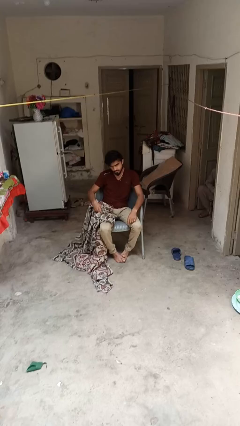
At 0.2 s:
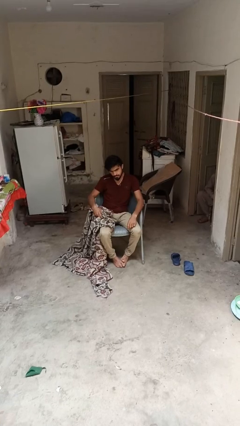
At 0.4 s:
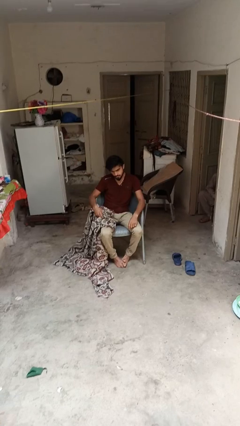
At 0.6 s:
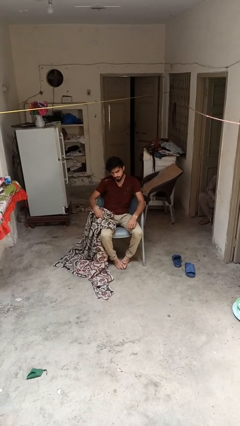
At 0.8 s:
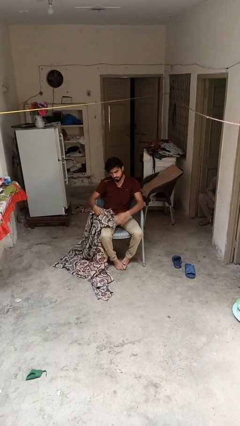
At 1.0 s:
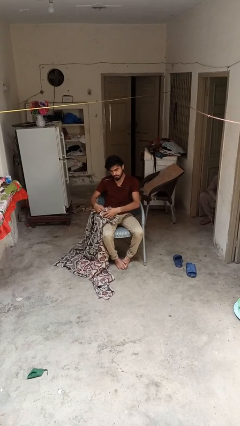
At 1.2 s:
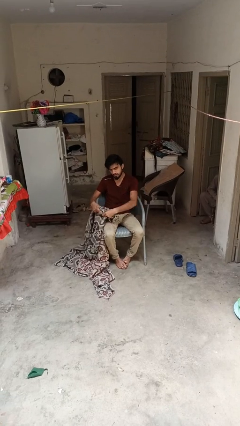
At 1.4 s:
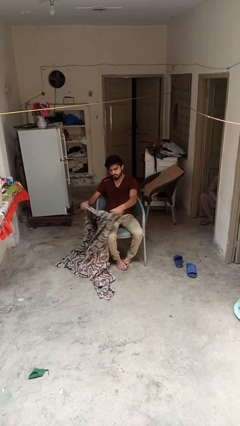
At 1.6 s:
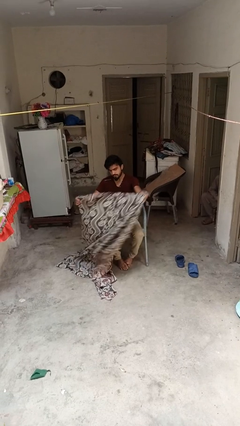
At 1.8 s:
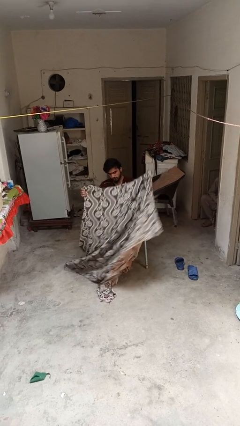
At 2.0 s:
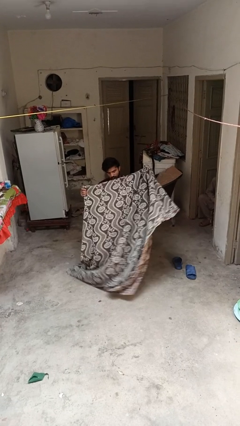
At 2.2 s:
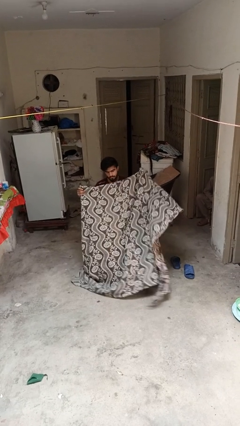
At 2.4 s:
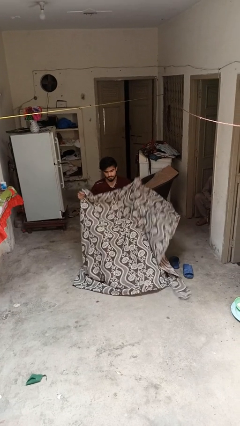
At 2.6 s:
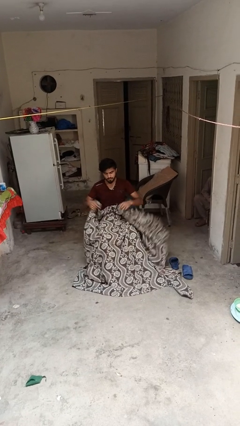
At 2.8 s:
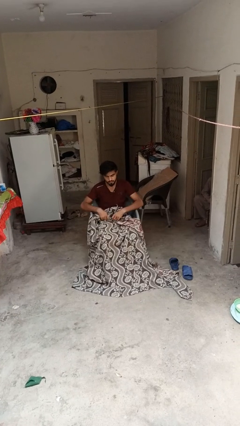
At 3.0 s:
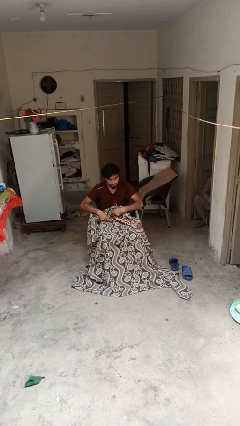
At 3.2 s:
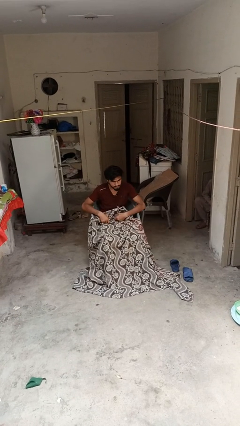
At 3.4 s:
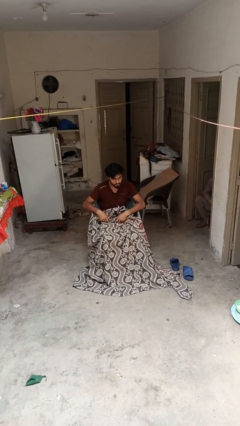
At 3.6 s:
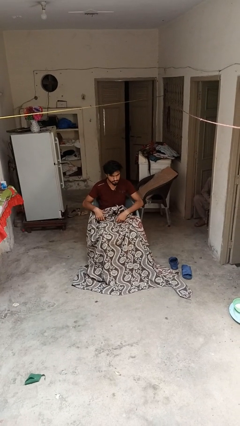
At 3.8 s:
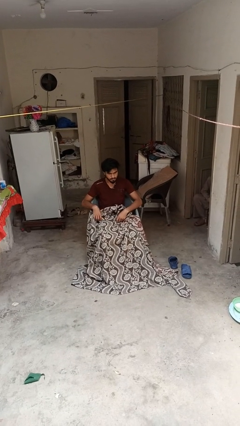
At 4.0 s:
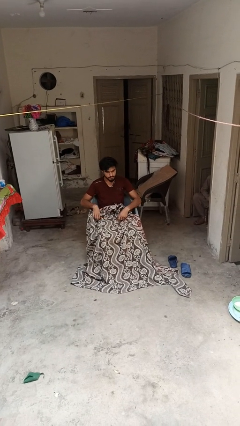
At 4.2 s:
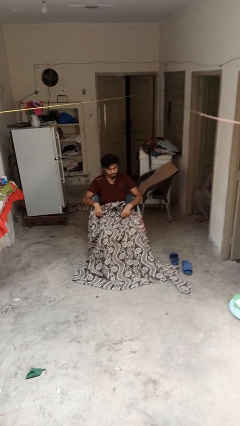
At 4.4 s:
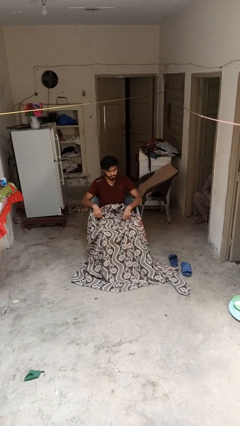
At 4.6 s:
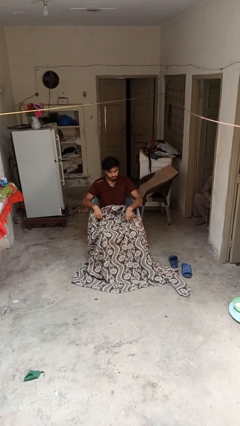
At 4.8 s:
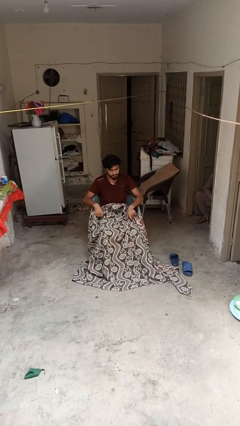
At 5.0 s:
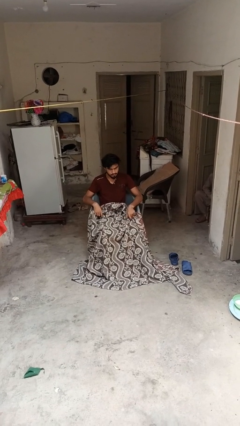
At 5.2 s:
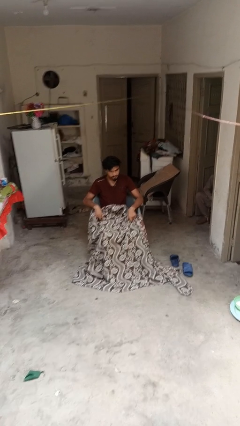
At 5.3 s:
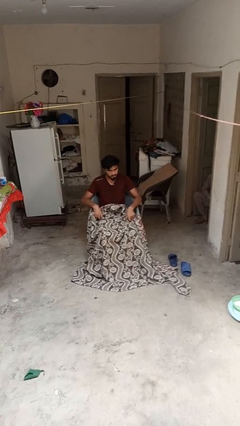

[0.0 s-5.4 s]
person covers with blanket

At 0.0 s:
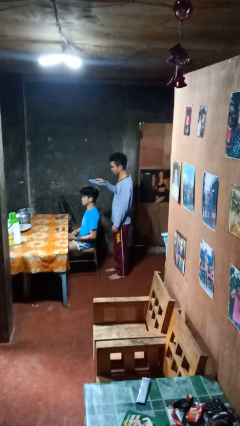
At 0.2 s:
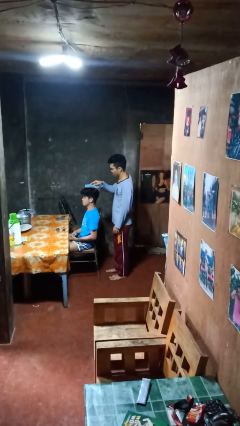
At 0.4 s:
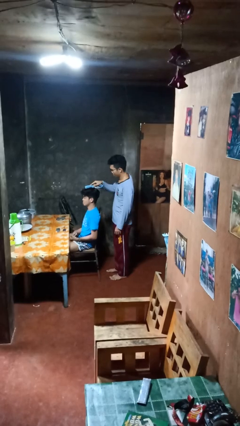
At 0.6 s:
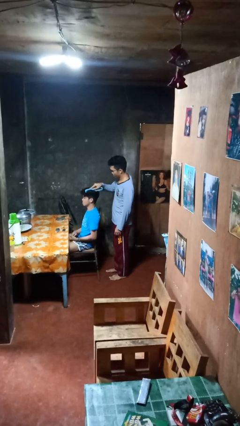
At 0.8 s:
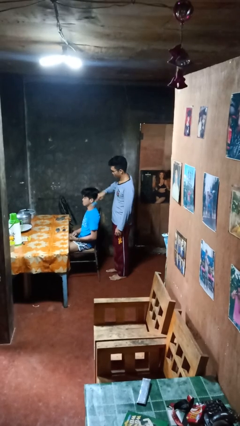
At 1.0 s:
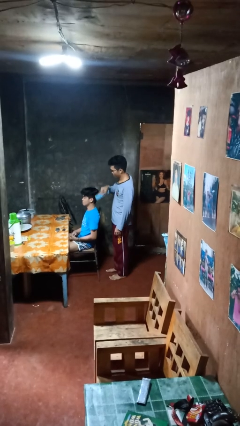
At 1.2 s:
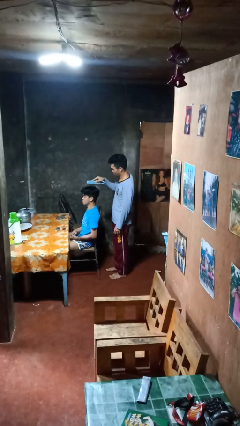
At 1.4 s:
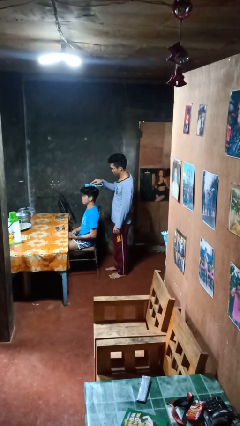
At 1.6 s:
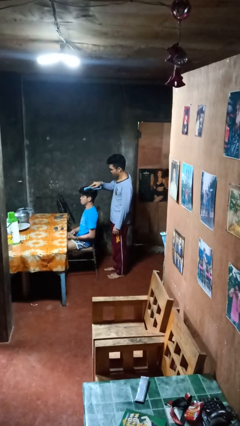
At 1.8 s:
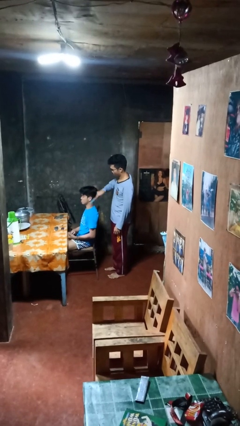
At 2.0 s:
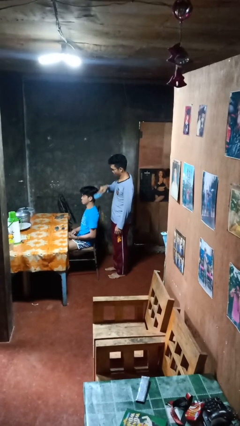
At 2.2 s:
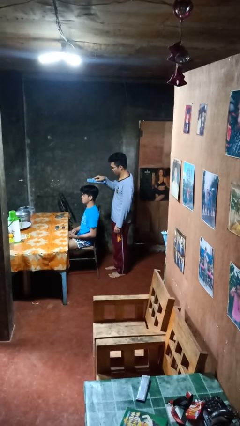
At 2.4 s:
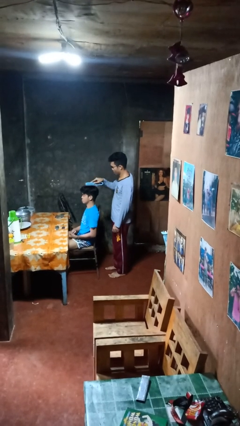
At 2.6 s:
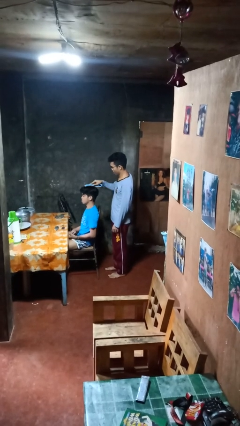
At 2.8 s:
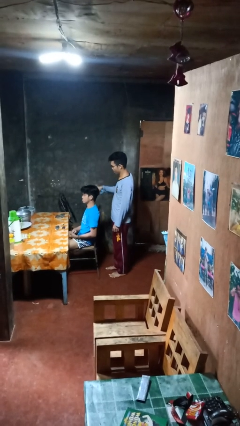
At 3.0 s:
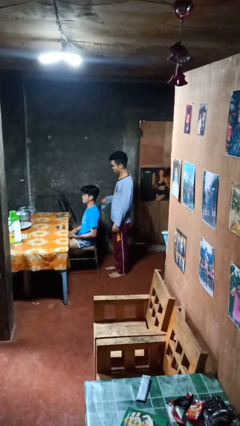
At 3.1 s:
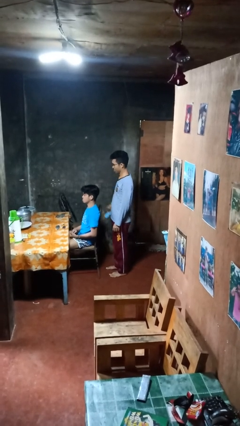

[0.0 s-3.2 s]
person brushes hair of person

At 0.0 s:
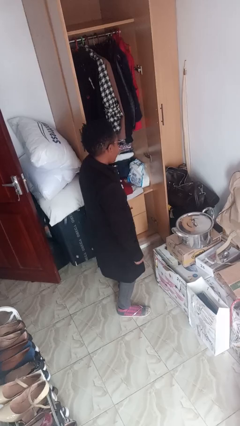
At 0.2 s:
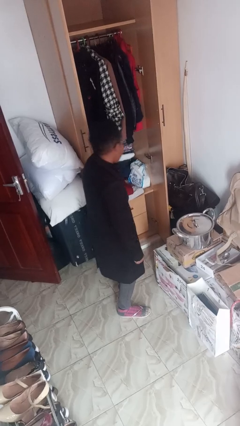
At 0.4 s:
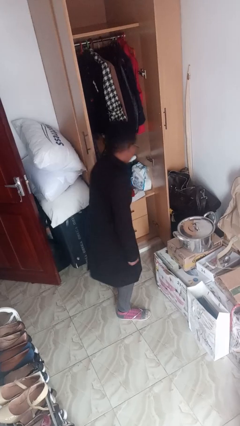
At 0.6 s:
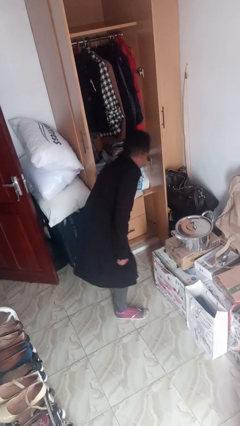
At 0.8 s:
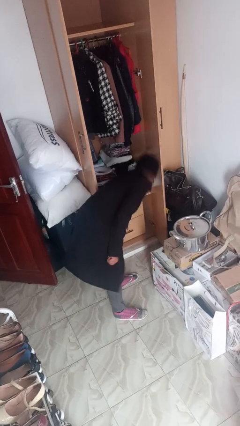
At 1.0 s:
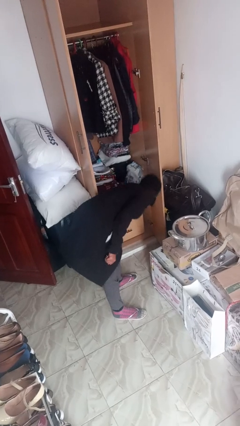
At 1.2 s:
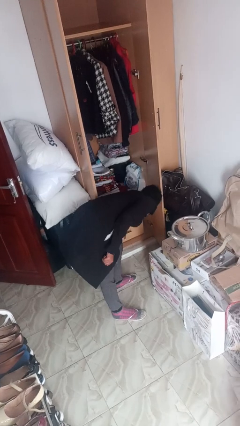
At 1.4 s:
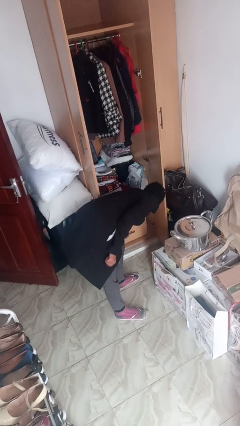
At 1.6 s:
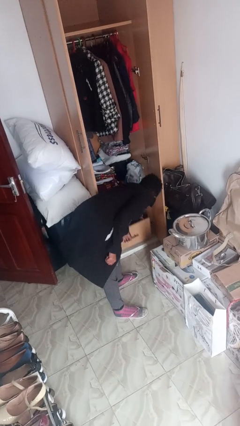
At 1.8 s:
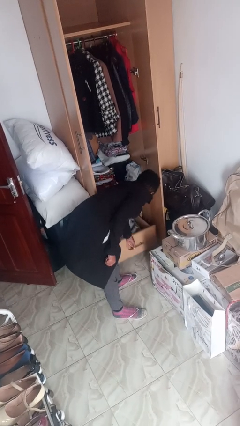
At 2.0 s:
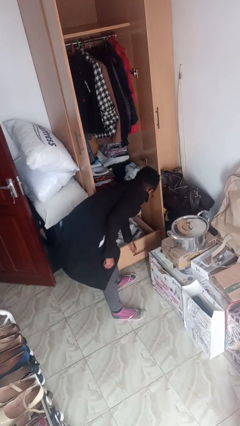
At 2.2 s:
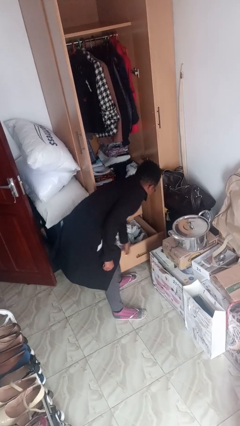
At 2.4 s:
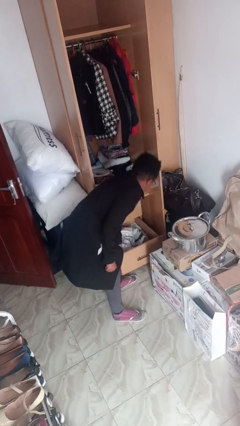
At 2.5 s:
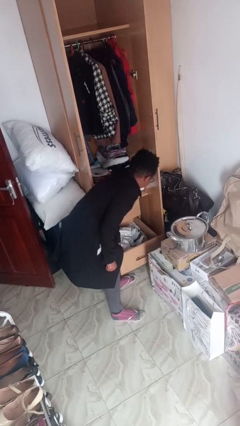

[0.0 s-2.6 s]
person opens dresser drawer

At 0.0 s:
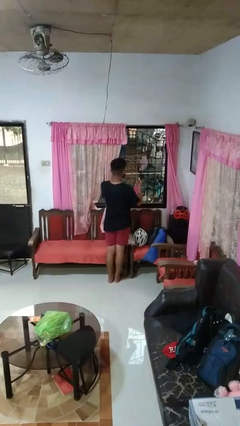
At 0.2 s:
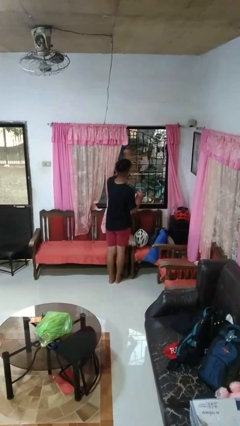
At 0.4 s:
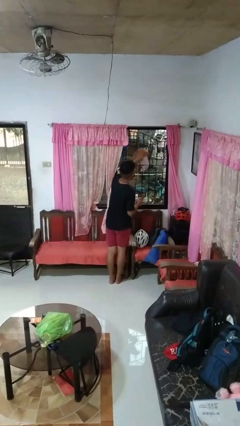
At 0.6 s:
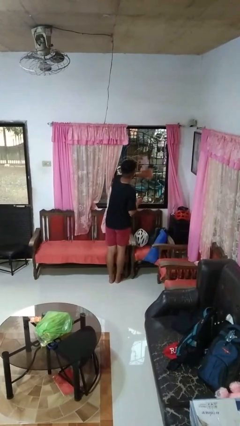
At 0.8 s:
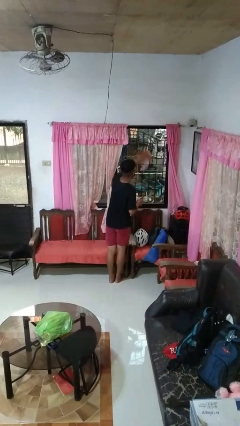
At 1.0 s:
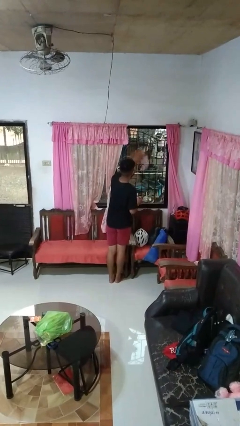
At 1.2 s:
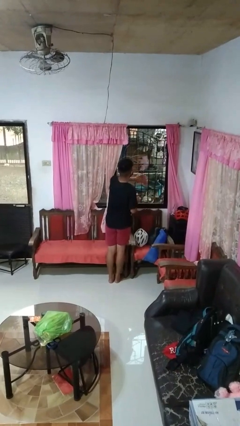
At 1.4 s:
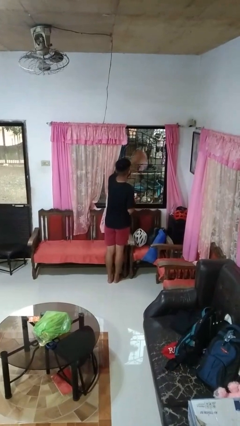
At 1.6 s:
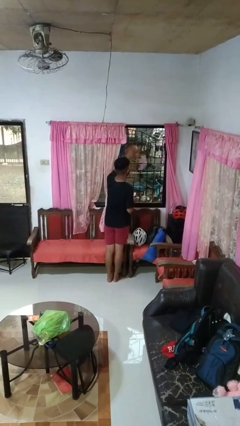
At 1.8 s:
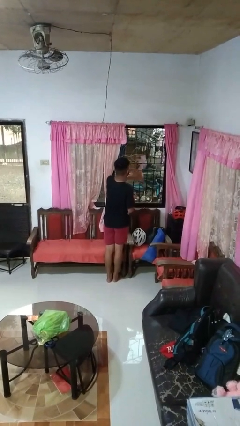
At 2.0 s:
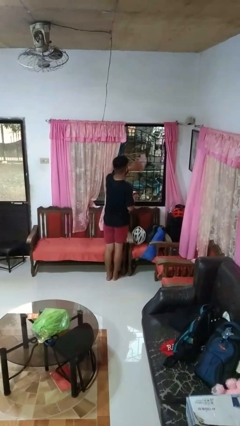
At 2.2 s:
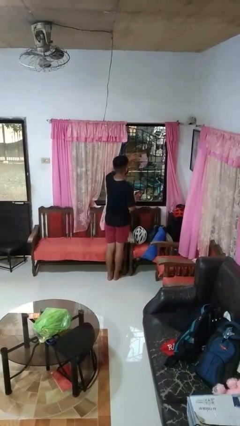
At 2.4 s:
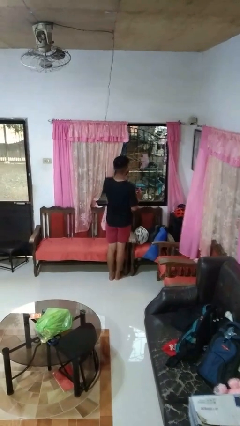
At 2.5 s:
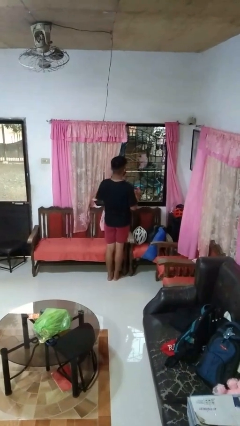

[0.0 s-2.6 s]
person washes window

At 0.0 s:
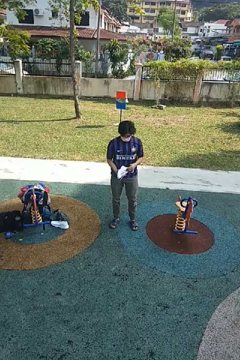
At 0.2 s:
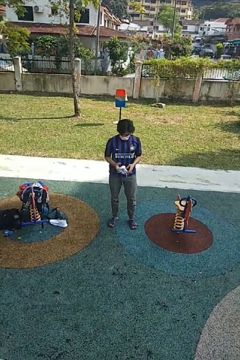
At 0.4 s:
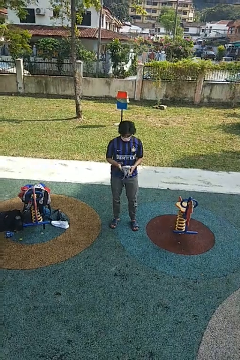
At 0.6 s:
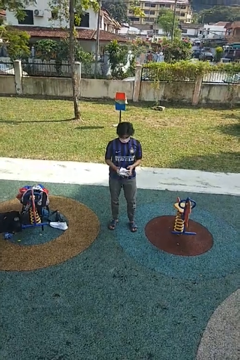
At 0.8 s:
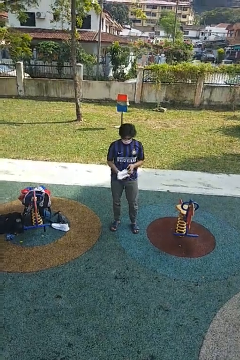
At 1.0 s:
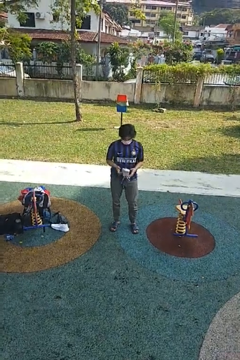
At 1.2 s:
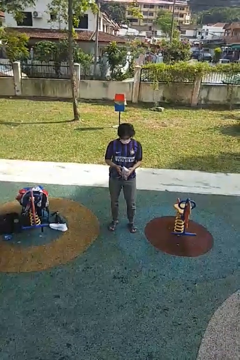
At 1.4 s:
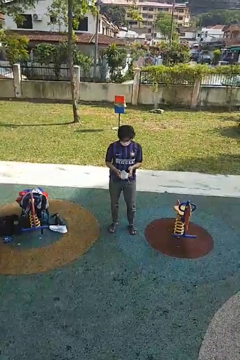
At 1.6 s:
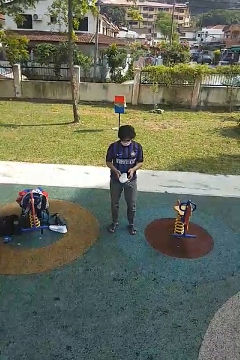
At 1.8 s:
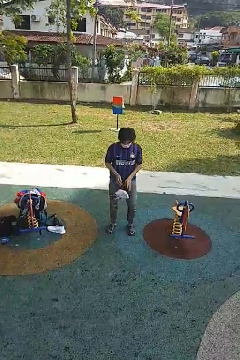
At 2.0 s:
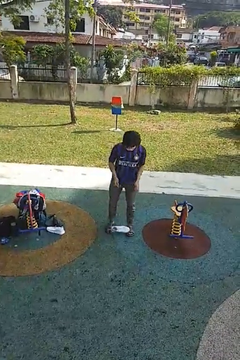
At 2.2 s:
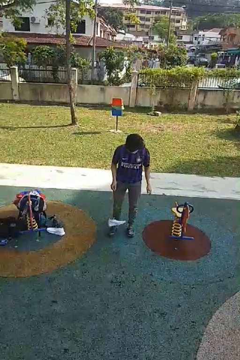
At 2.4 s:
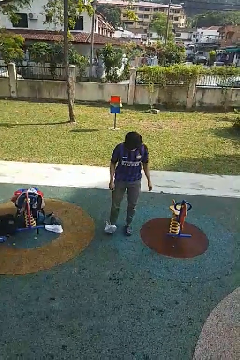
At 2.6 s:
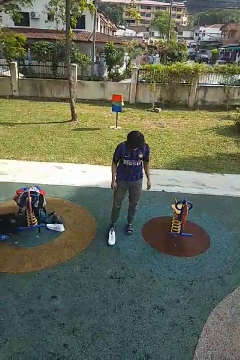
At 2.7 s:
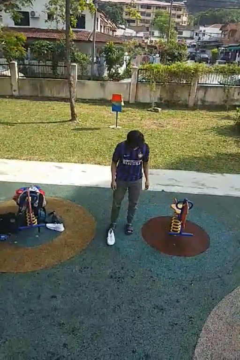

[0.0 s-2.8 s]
person drops object

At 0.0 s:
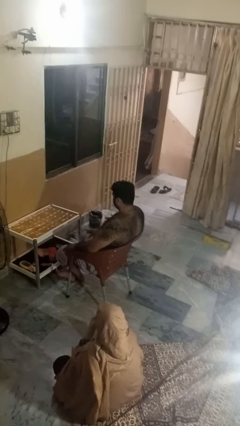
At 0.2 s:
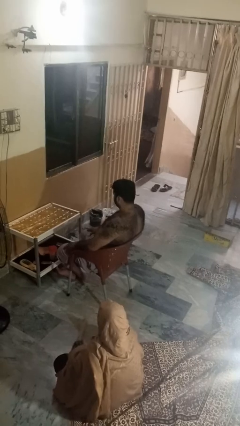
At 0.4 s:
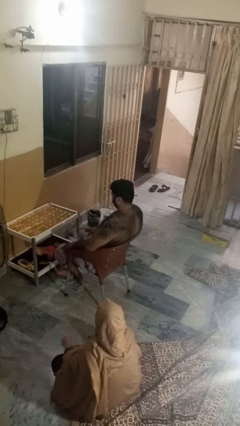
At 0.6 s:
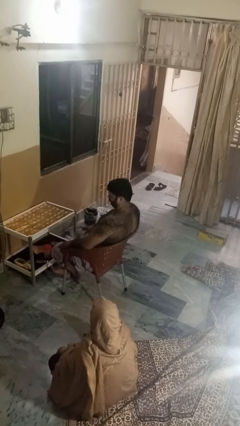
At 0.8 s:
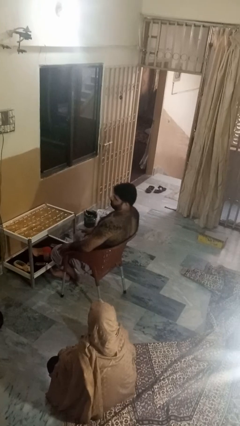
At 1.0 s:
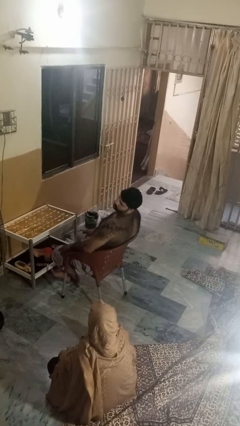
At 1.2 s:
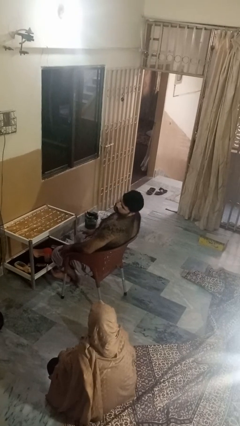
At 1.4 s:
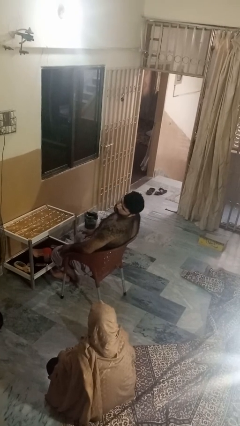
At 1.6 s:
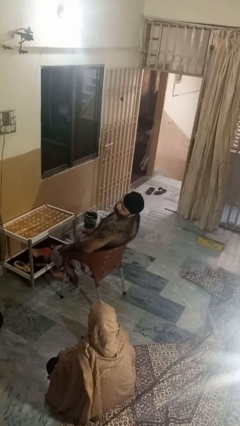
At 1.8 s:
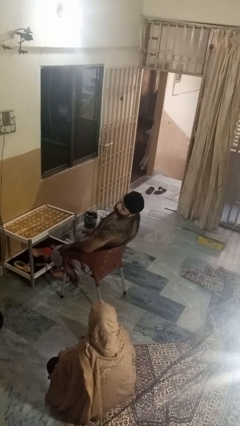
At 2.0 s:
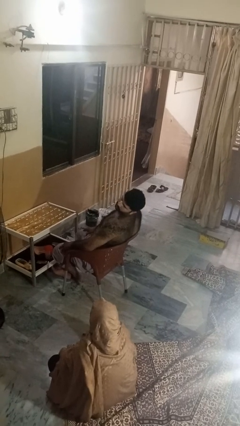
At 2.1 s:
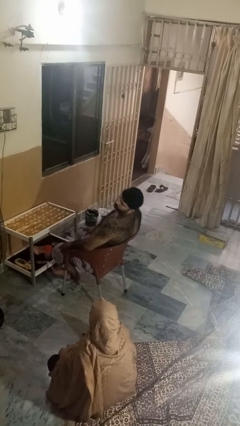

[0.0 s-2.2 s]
person looks over shoulder
